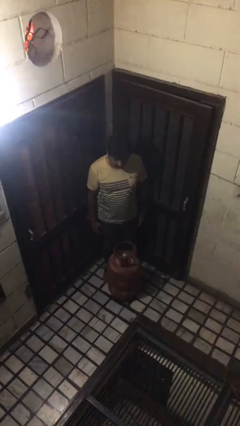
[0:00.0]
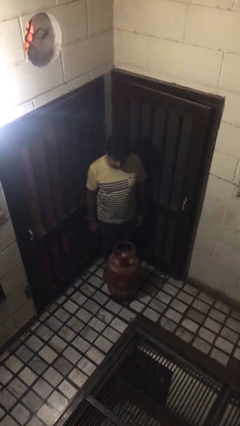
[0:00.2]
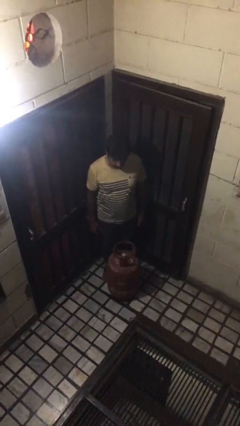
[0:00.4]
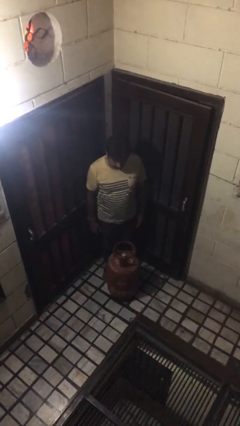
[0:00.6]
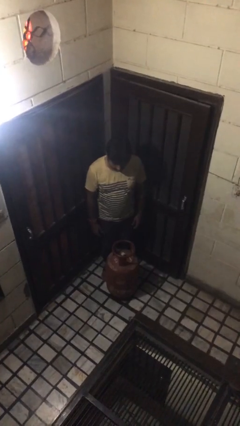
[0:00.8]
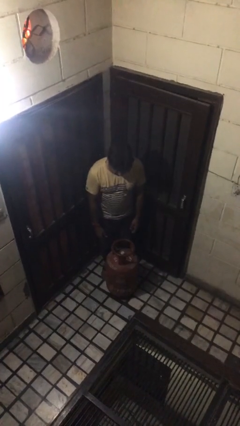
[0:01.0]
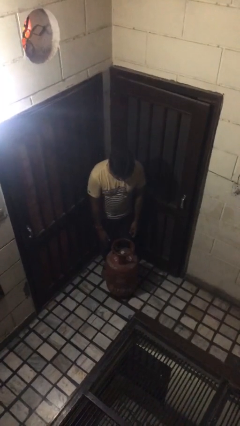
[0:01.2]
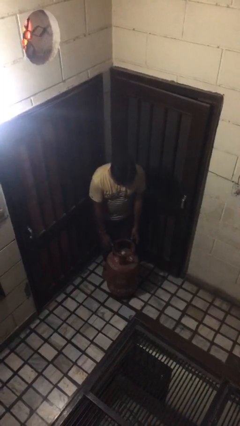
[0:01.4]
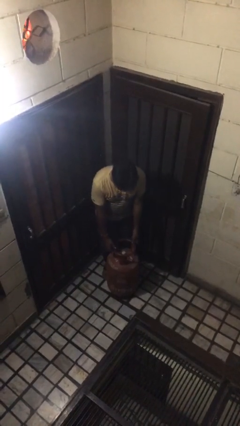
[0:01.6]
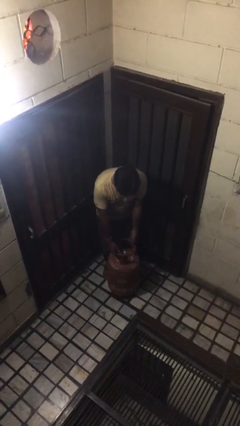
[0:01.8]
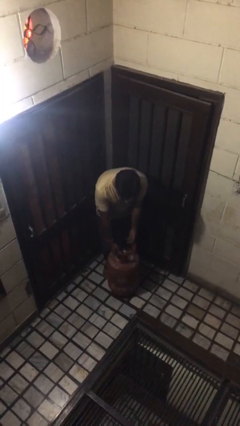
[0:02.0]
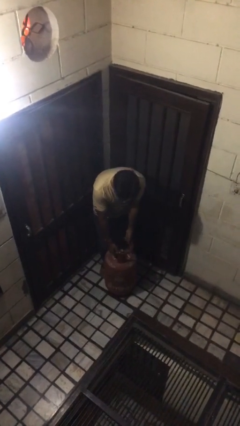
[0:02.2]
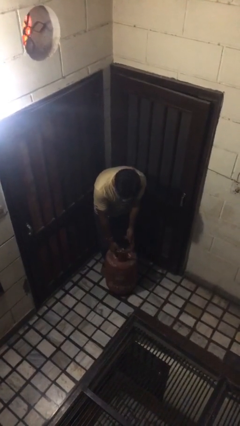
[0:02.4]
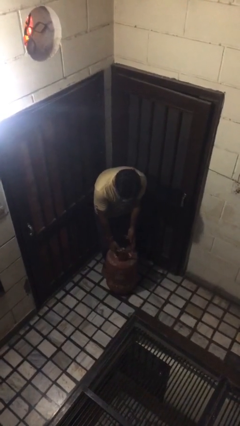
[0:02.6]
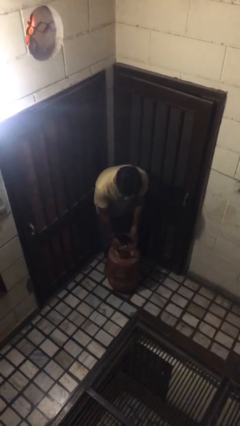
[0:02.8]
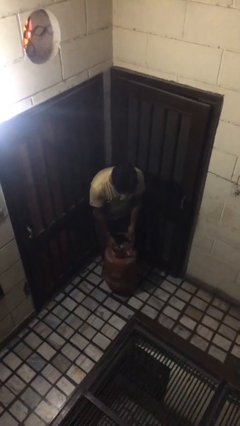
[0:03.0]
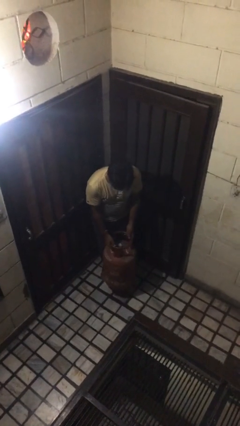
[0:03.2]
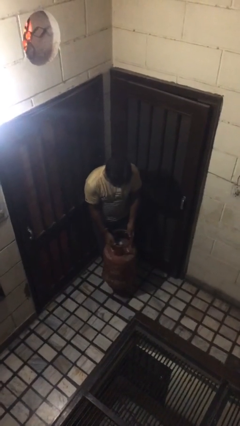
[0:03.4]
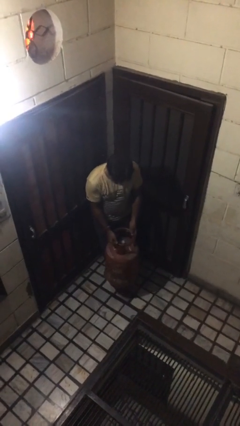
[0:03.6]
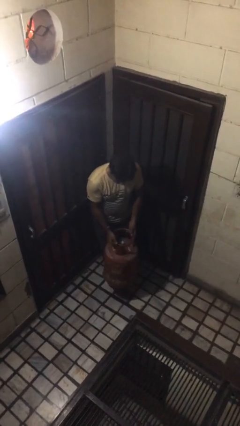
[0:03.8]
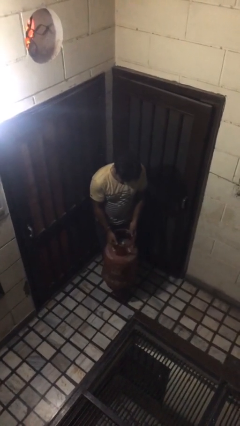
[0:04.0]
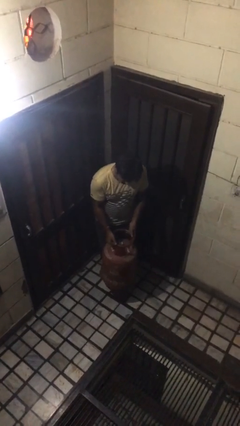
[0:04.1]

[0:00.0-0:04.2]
person picks up object from floor

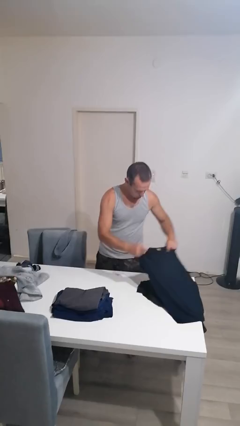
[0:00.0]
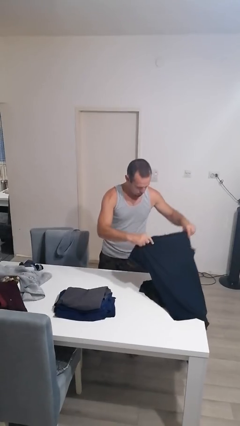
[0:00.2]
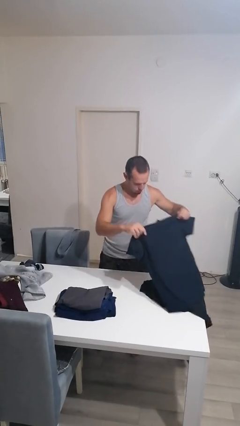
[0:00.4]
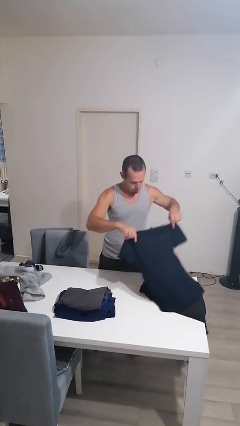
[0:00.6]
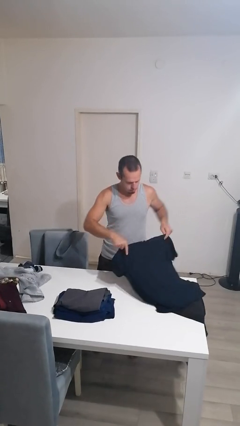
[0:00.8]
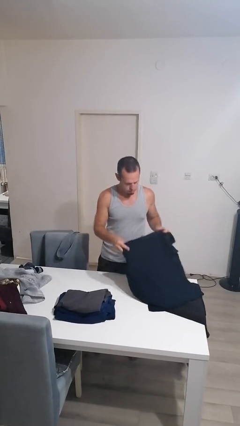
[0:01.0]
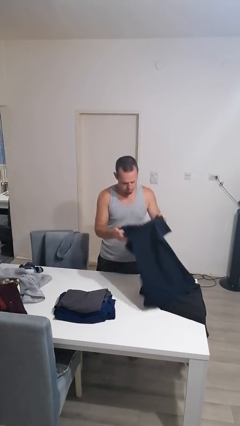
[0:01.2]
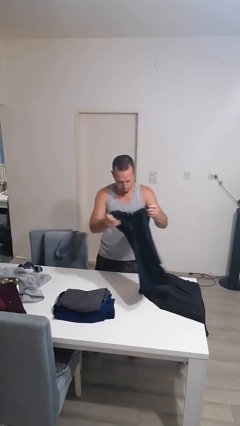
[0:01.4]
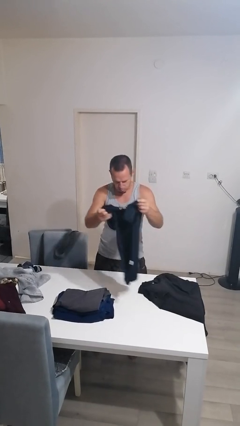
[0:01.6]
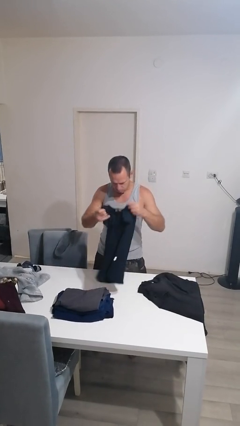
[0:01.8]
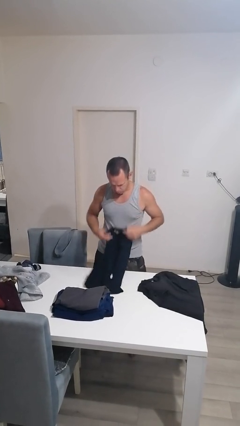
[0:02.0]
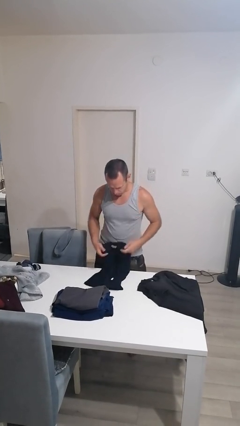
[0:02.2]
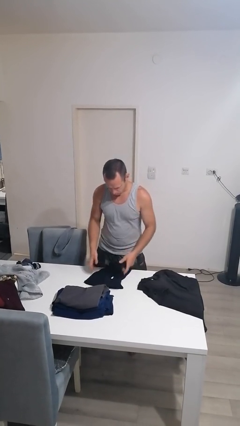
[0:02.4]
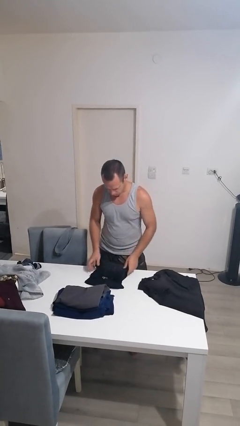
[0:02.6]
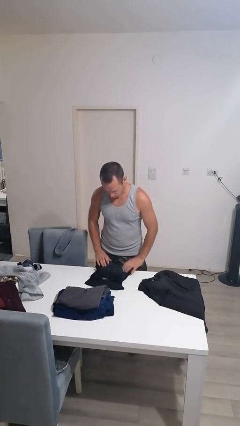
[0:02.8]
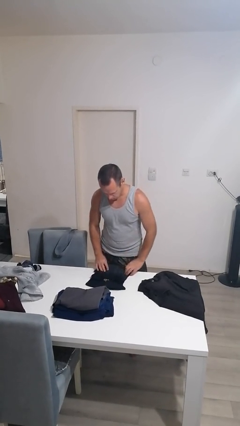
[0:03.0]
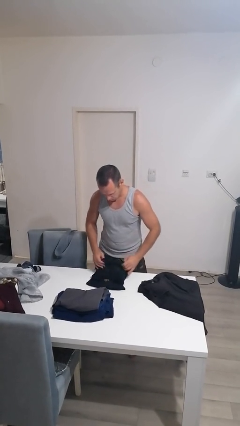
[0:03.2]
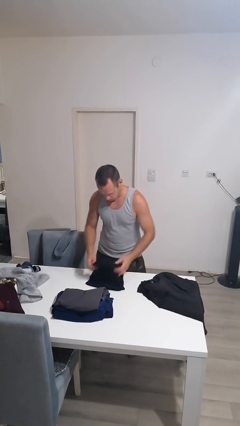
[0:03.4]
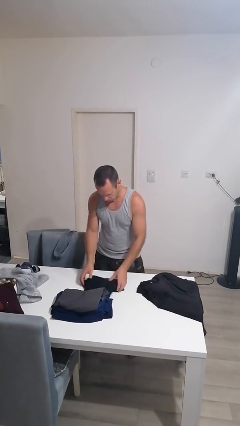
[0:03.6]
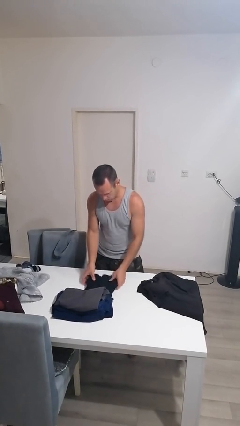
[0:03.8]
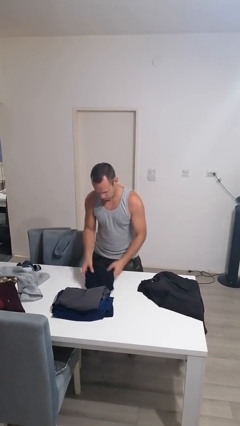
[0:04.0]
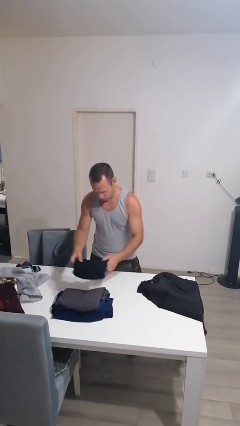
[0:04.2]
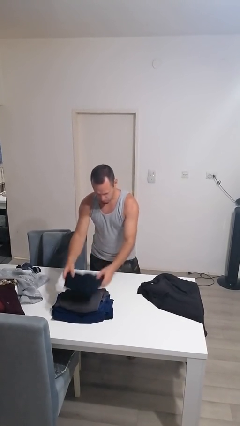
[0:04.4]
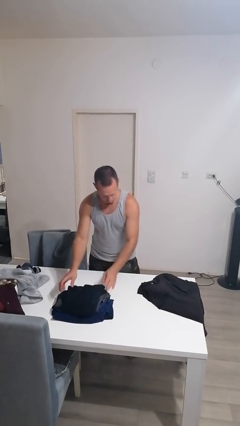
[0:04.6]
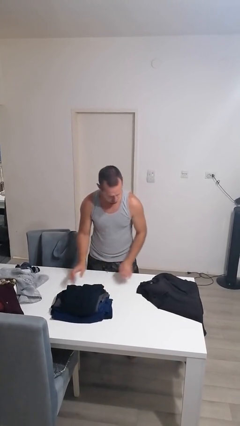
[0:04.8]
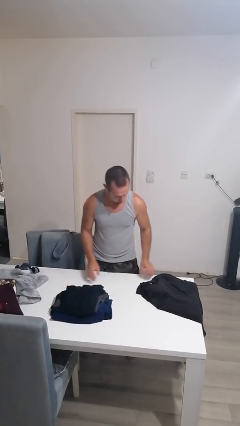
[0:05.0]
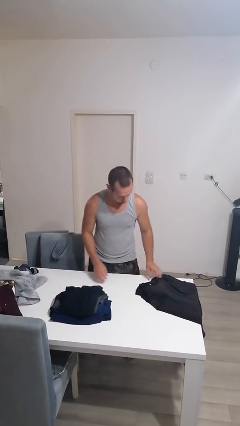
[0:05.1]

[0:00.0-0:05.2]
person folds shirt

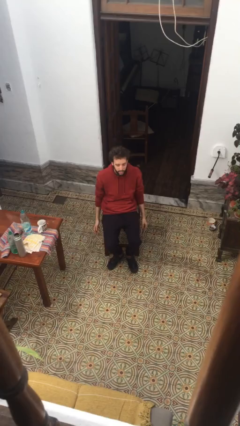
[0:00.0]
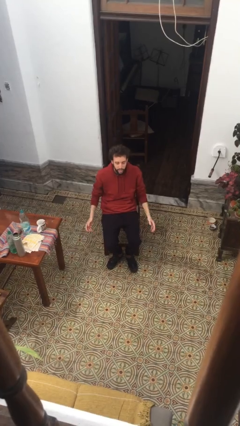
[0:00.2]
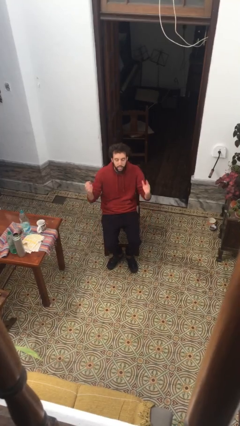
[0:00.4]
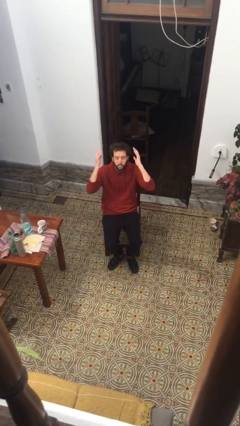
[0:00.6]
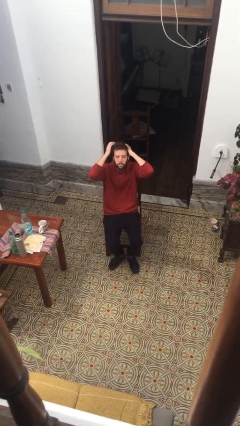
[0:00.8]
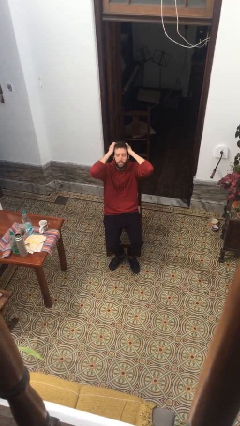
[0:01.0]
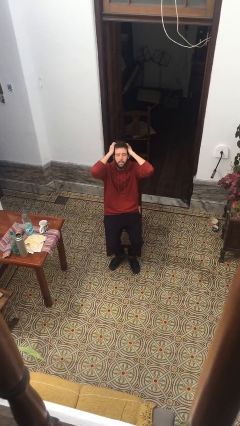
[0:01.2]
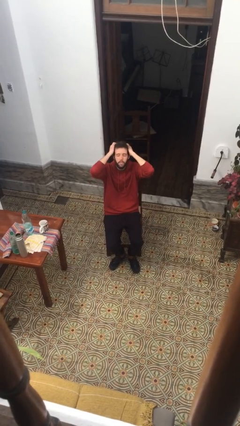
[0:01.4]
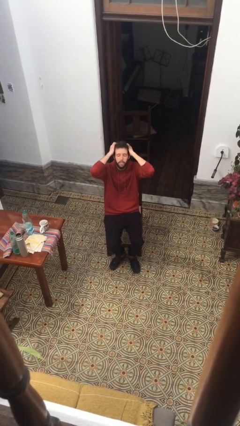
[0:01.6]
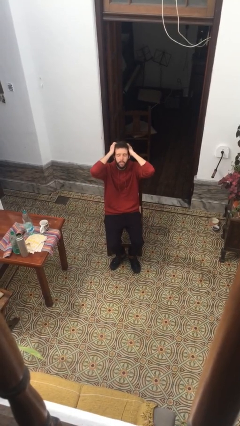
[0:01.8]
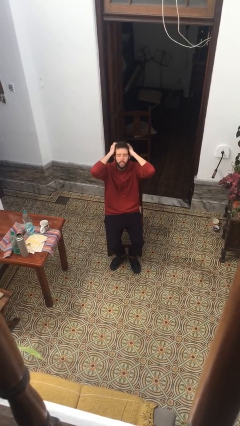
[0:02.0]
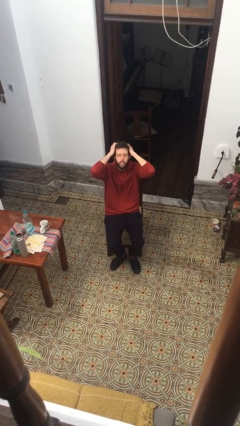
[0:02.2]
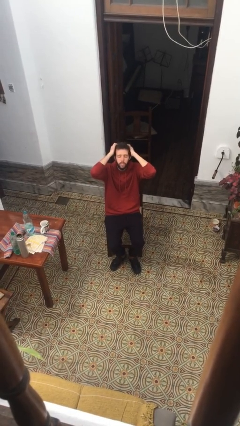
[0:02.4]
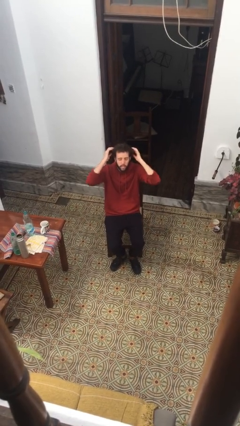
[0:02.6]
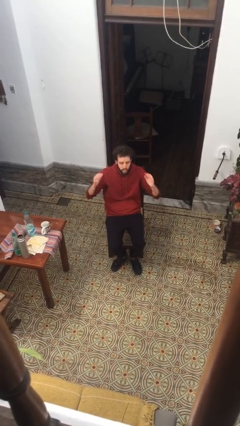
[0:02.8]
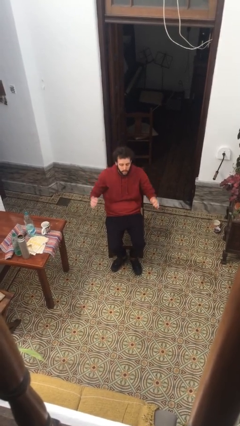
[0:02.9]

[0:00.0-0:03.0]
person covers face with hands

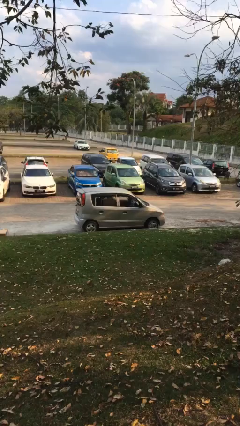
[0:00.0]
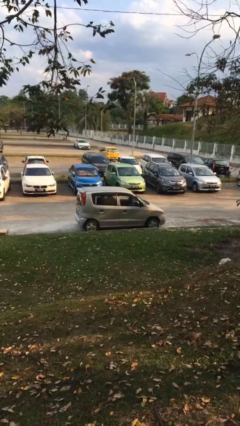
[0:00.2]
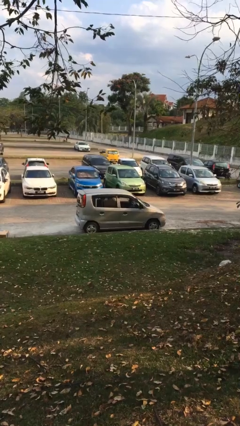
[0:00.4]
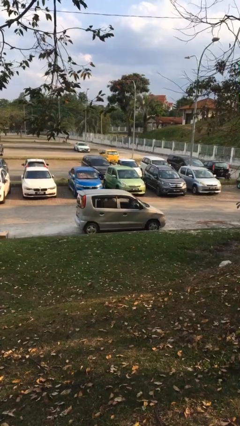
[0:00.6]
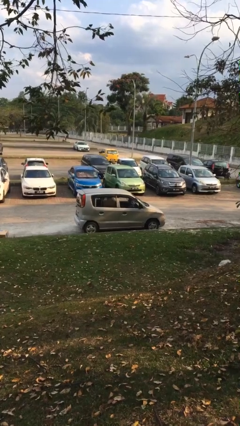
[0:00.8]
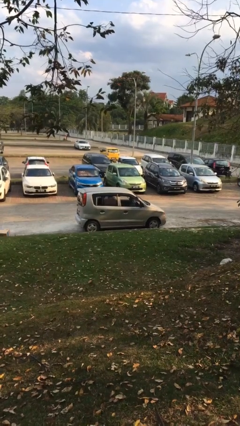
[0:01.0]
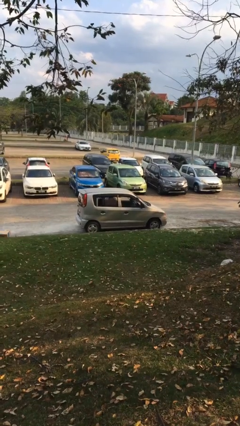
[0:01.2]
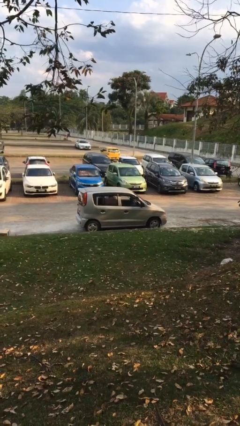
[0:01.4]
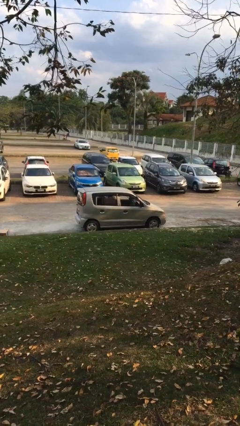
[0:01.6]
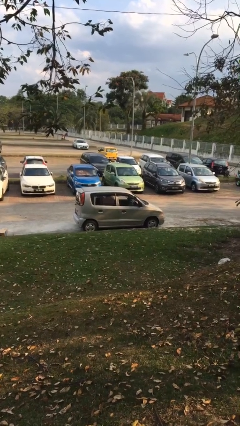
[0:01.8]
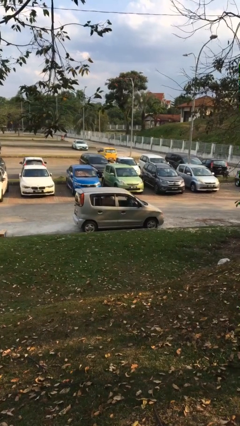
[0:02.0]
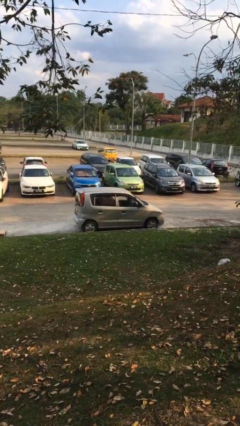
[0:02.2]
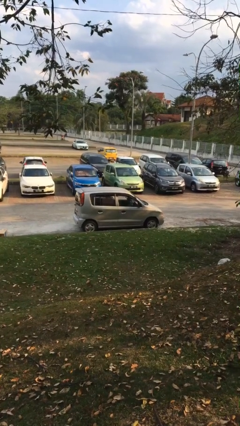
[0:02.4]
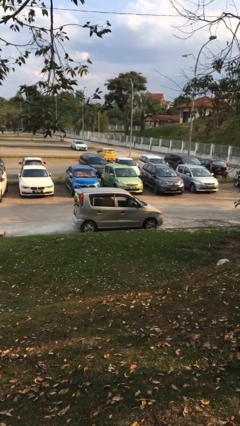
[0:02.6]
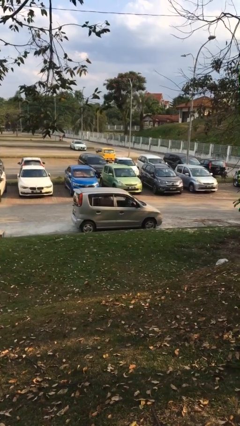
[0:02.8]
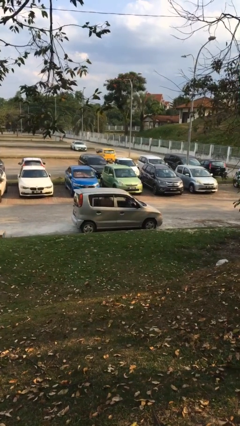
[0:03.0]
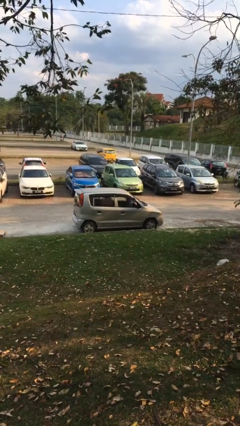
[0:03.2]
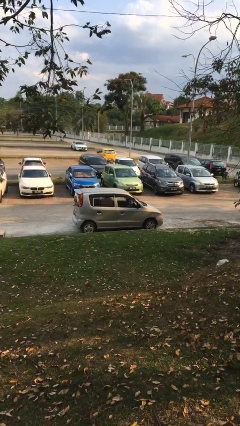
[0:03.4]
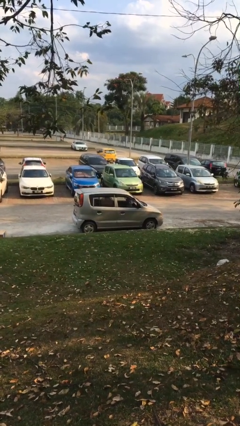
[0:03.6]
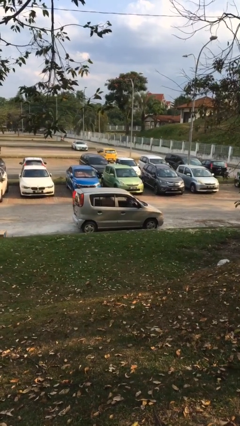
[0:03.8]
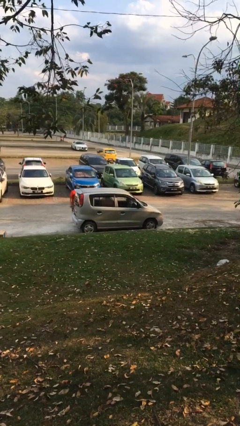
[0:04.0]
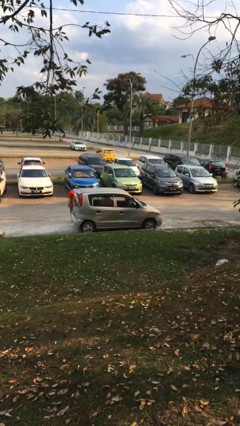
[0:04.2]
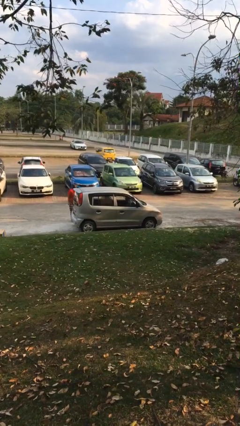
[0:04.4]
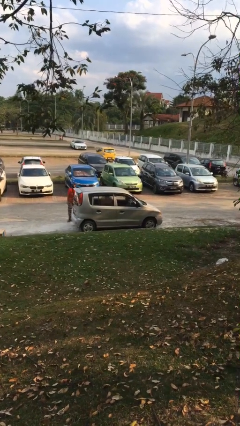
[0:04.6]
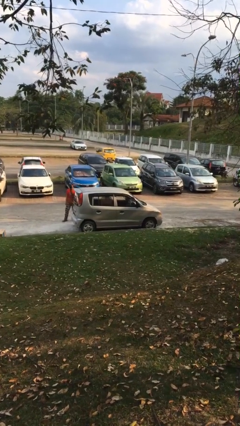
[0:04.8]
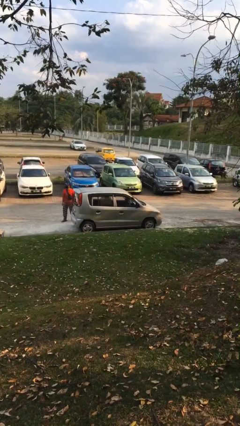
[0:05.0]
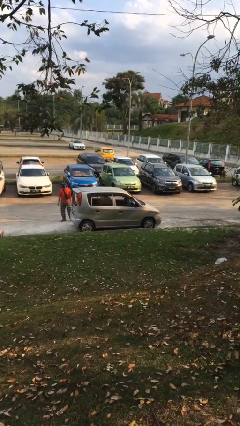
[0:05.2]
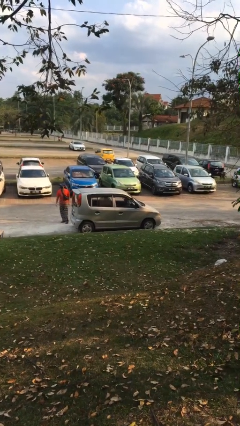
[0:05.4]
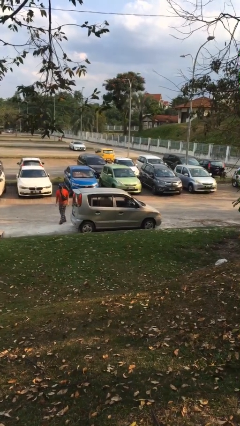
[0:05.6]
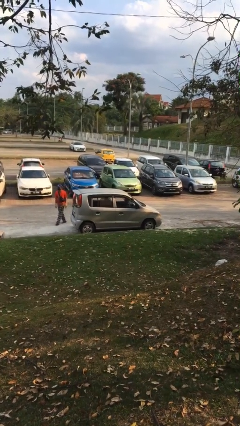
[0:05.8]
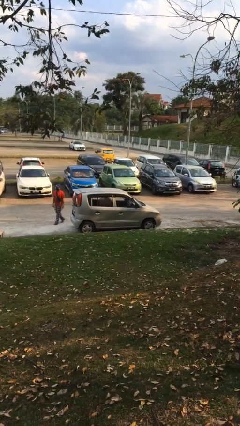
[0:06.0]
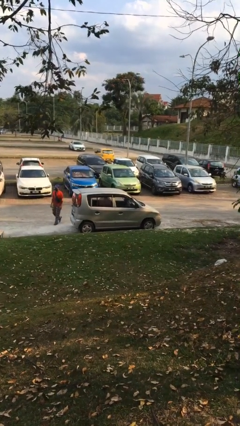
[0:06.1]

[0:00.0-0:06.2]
car drops off person
